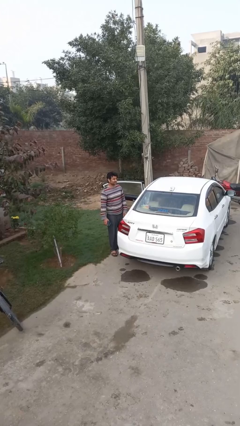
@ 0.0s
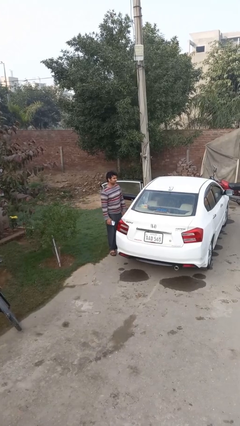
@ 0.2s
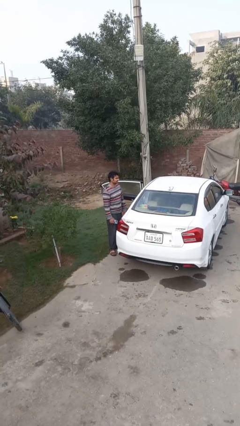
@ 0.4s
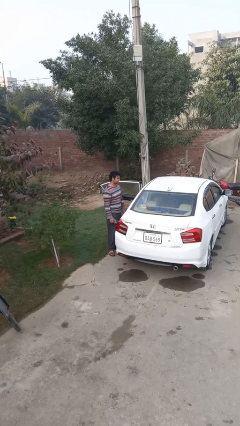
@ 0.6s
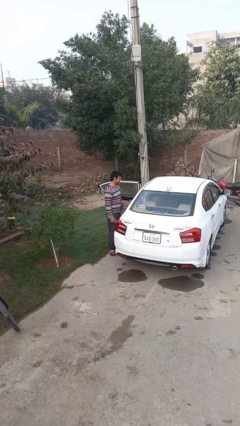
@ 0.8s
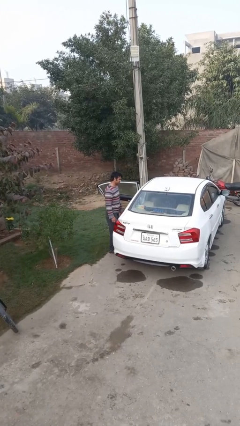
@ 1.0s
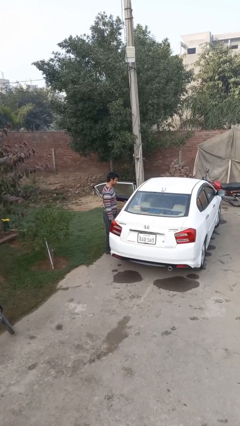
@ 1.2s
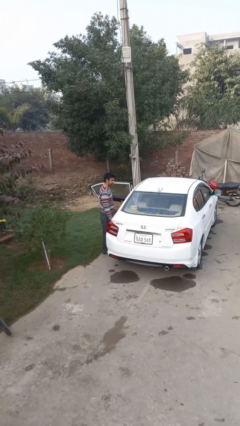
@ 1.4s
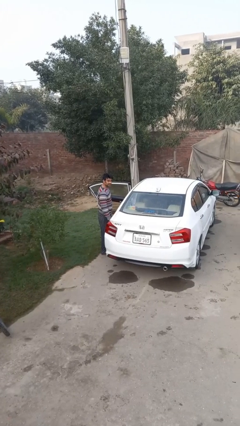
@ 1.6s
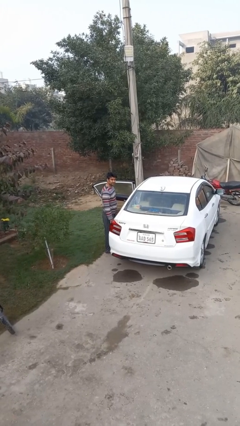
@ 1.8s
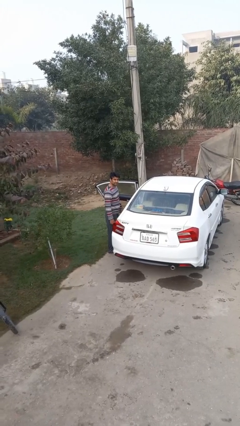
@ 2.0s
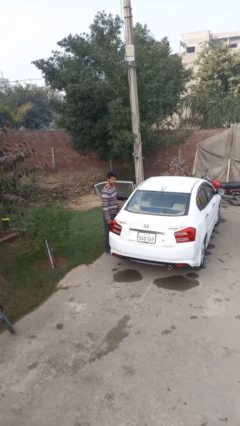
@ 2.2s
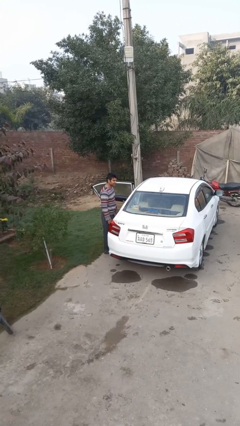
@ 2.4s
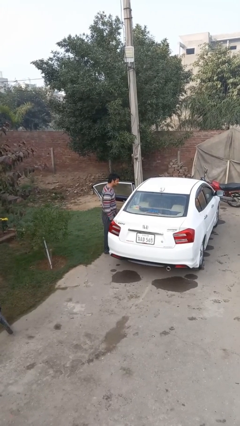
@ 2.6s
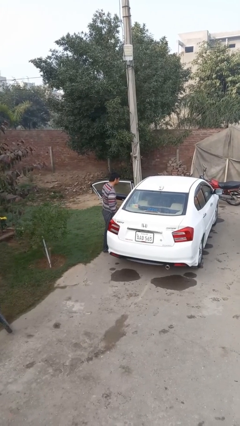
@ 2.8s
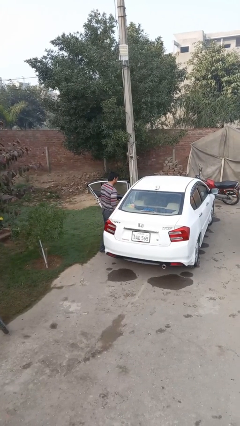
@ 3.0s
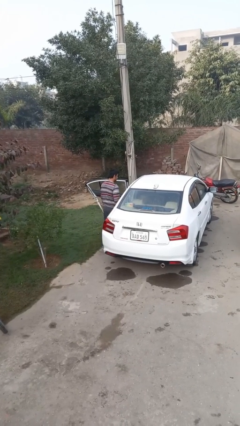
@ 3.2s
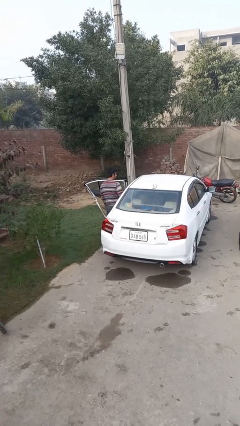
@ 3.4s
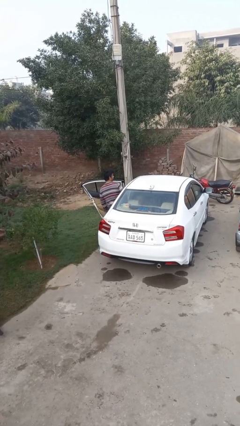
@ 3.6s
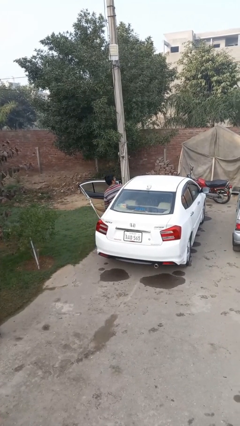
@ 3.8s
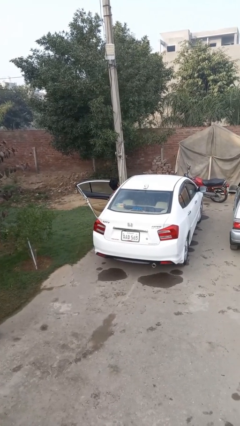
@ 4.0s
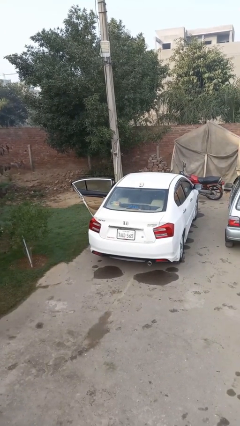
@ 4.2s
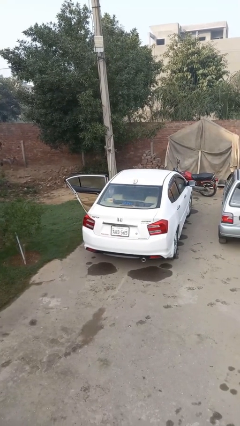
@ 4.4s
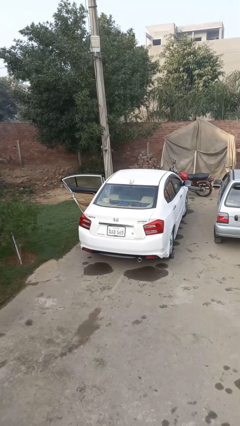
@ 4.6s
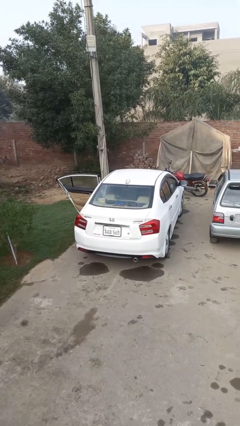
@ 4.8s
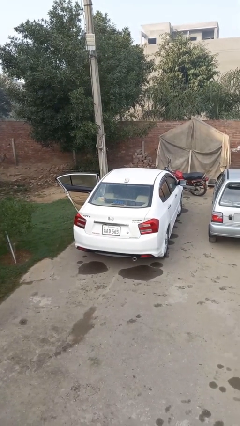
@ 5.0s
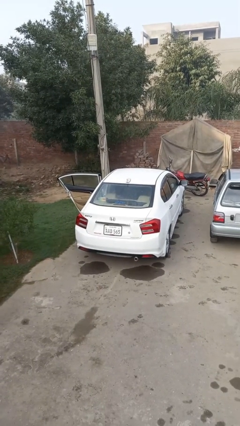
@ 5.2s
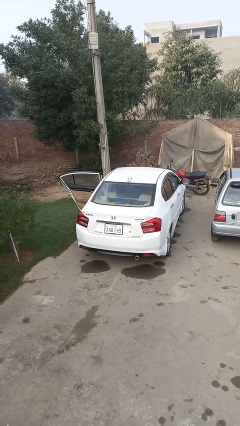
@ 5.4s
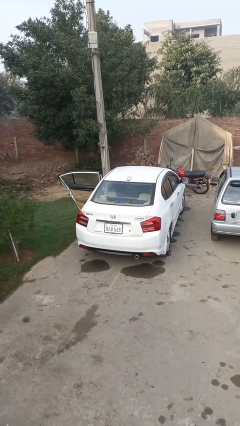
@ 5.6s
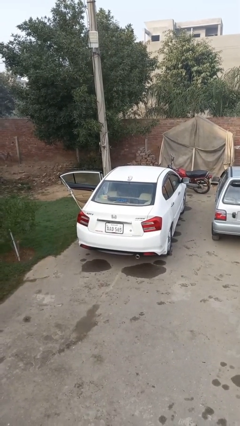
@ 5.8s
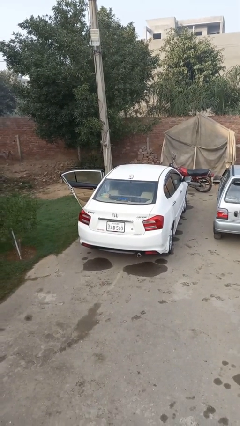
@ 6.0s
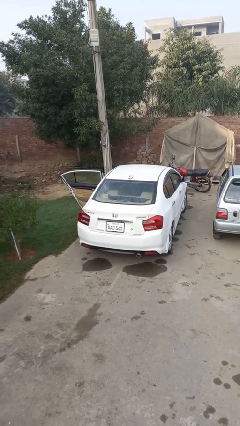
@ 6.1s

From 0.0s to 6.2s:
person enters car

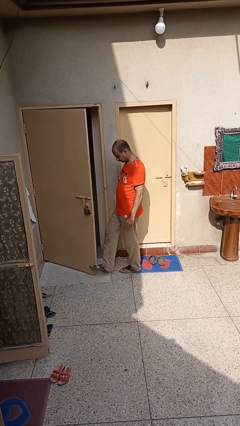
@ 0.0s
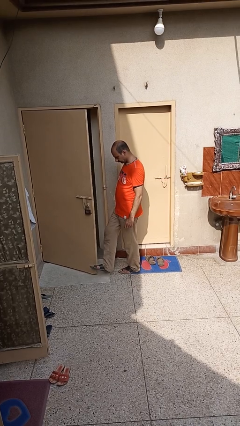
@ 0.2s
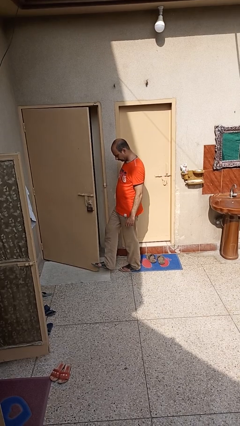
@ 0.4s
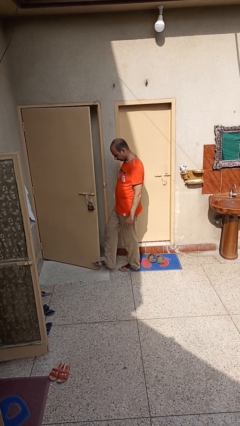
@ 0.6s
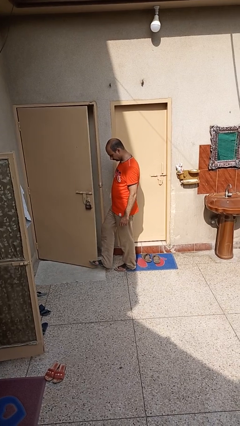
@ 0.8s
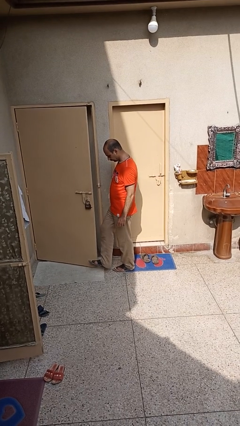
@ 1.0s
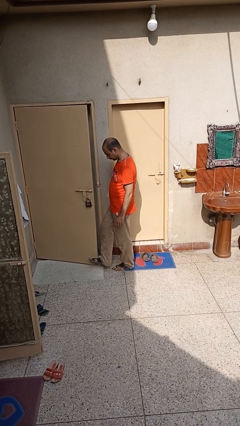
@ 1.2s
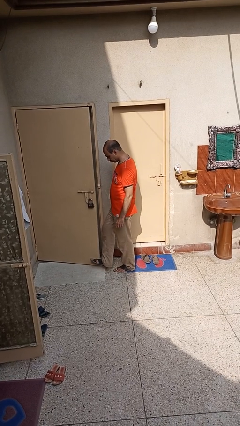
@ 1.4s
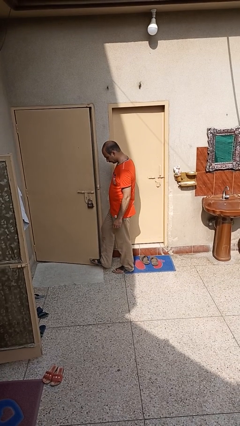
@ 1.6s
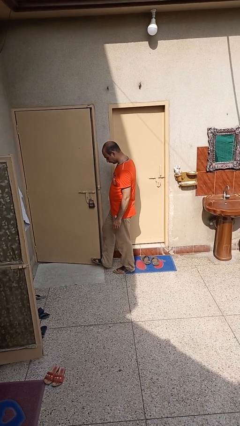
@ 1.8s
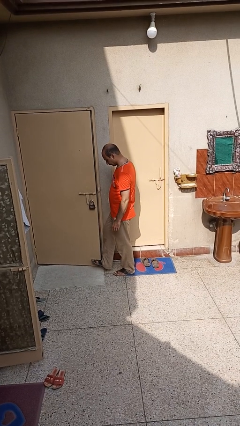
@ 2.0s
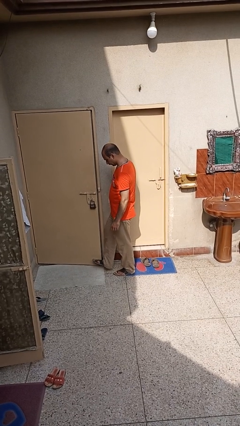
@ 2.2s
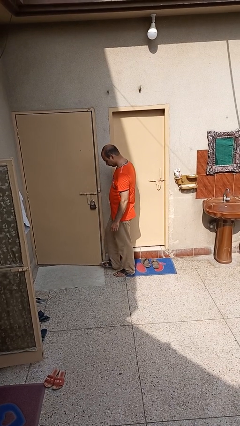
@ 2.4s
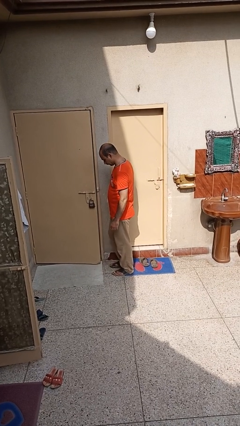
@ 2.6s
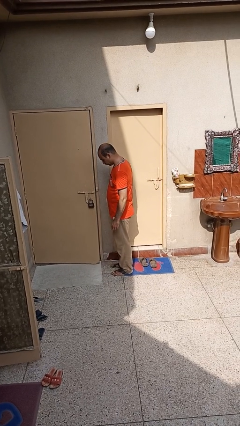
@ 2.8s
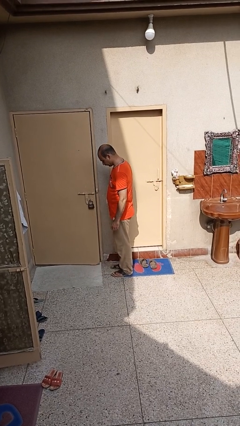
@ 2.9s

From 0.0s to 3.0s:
person closes door with foot

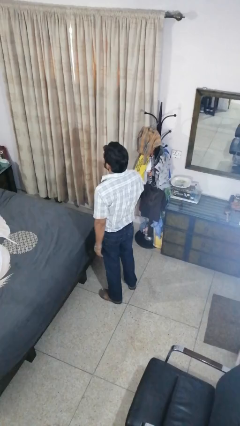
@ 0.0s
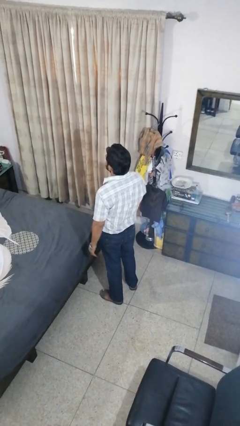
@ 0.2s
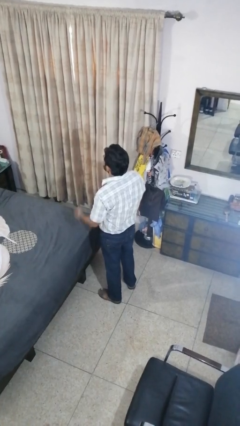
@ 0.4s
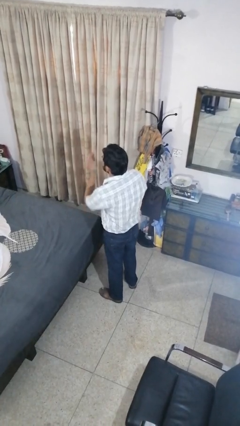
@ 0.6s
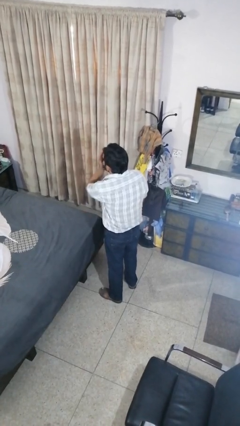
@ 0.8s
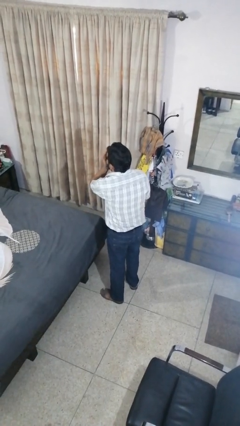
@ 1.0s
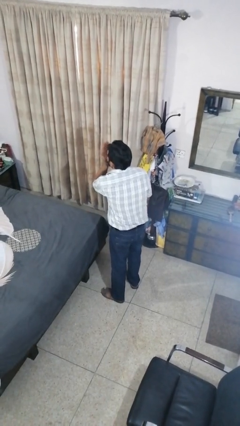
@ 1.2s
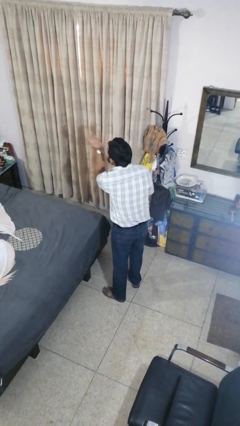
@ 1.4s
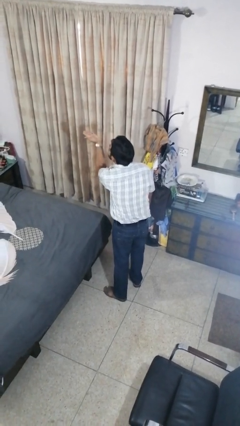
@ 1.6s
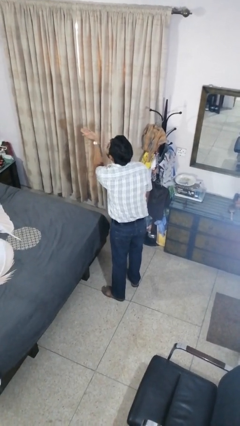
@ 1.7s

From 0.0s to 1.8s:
person gestures blow kiss

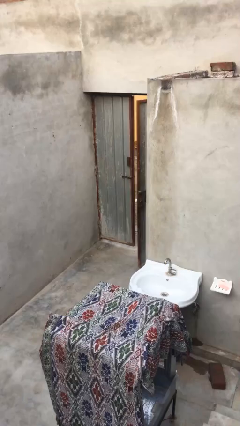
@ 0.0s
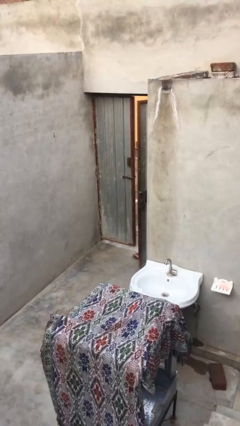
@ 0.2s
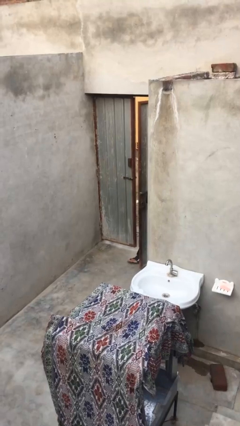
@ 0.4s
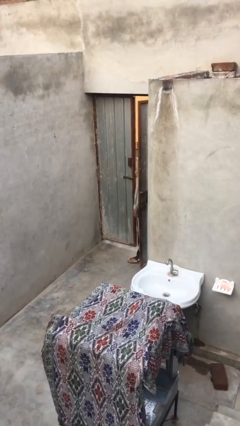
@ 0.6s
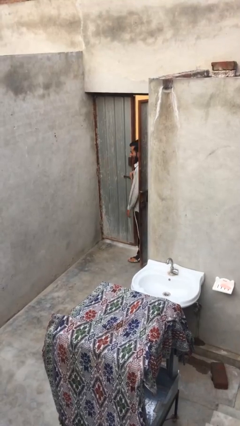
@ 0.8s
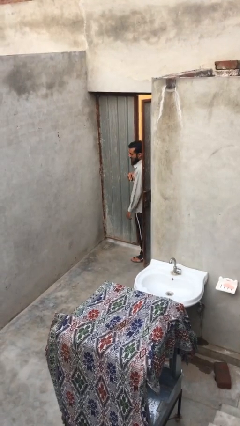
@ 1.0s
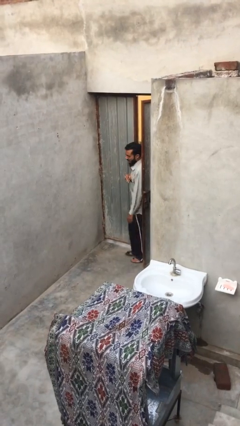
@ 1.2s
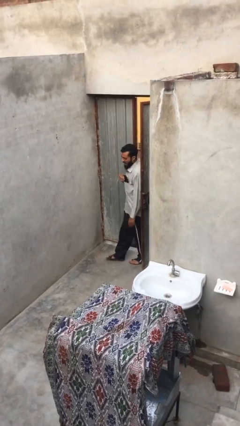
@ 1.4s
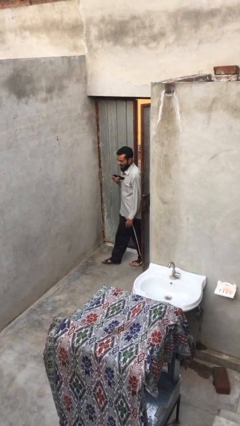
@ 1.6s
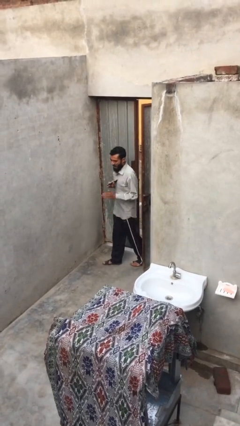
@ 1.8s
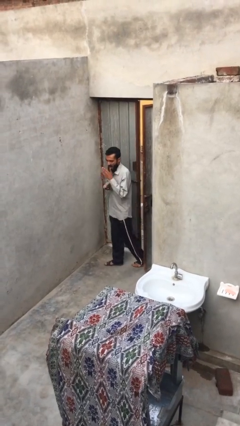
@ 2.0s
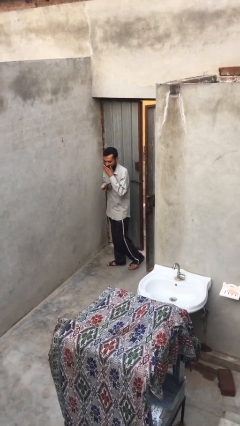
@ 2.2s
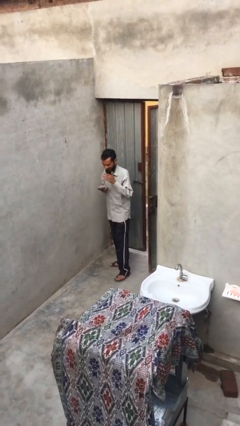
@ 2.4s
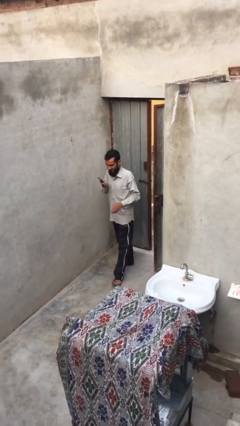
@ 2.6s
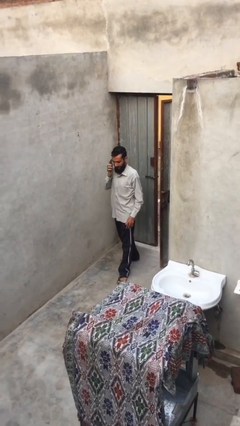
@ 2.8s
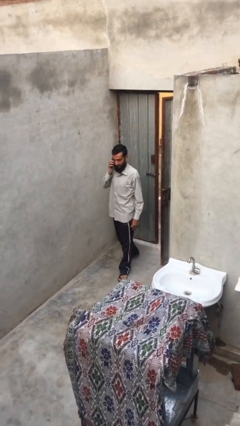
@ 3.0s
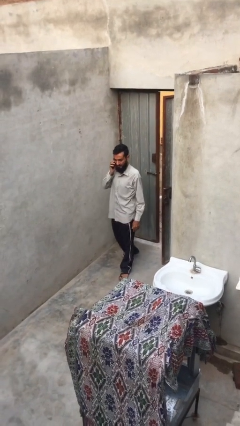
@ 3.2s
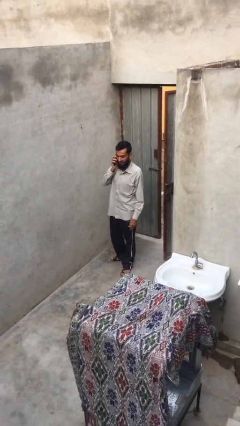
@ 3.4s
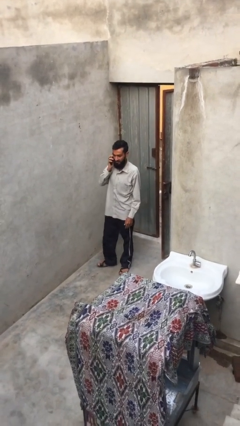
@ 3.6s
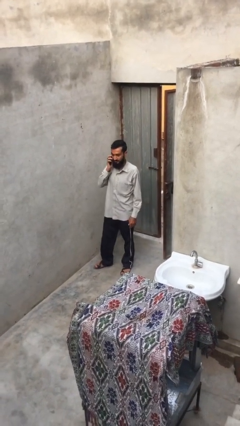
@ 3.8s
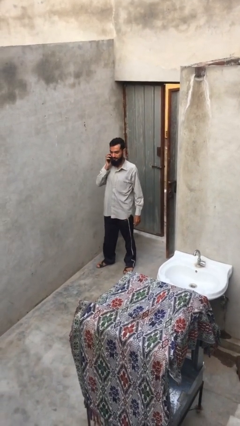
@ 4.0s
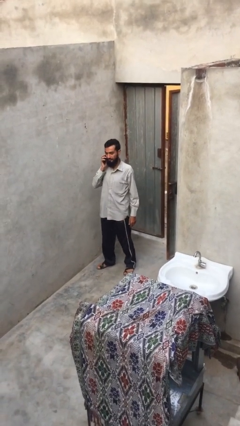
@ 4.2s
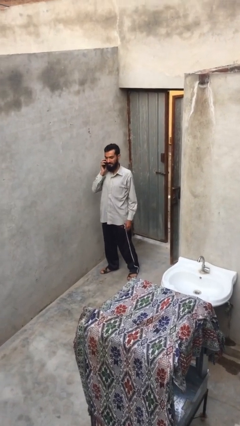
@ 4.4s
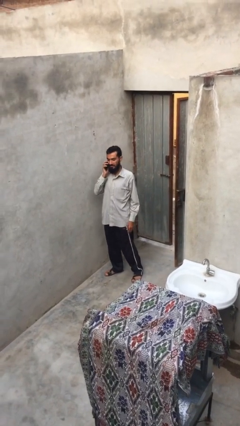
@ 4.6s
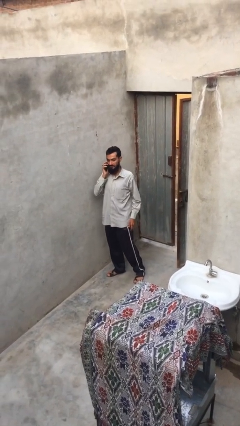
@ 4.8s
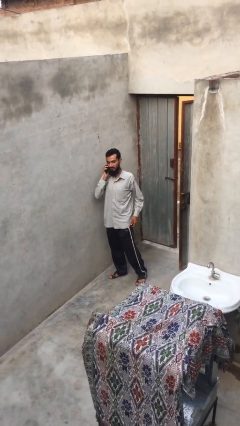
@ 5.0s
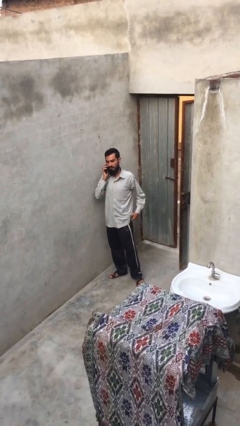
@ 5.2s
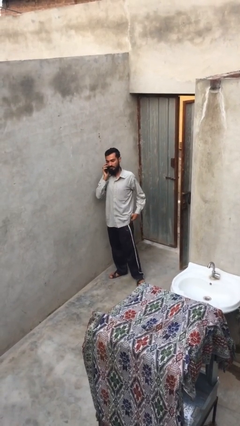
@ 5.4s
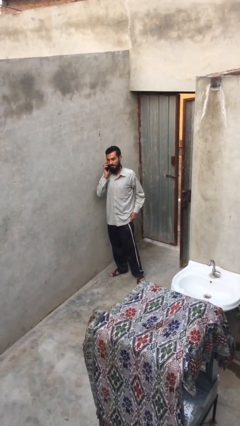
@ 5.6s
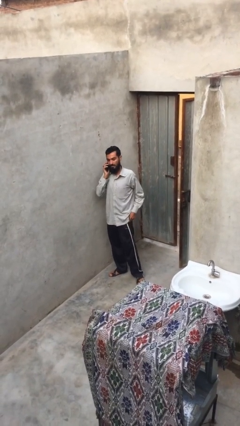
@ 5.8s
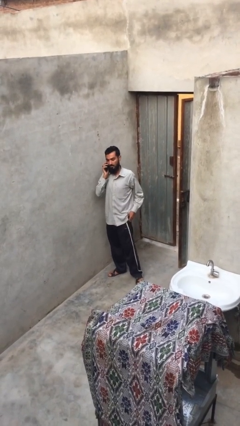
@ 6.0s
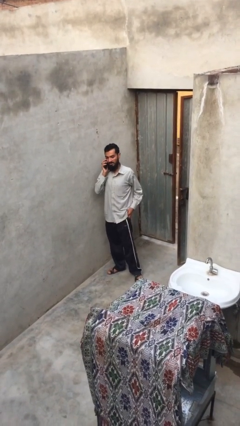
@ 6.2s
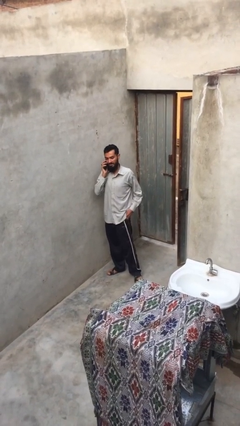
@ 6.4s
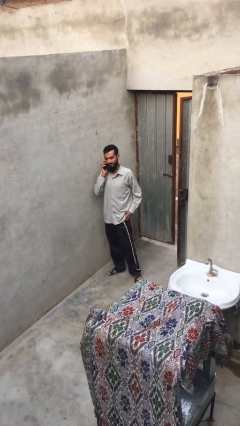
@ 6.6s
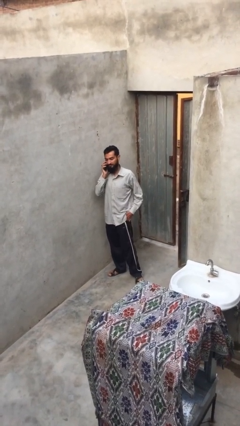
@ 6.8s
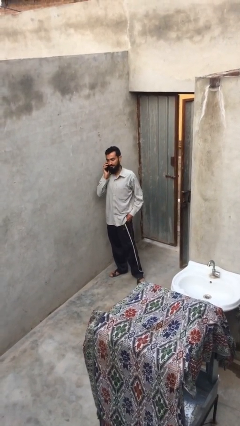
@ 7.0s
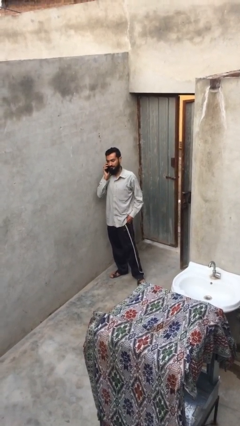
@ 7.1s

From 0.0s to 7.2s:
person enters scene through structure
